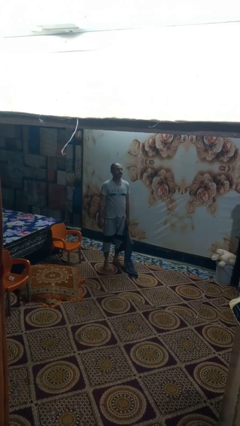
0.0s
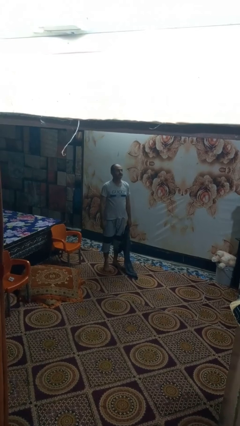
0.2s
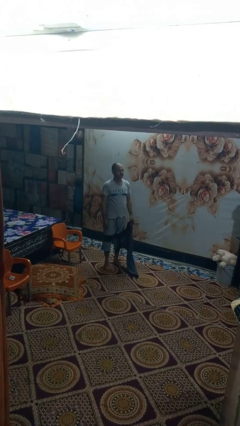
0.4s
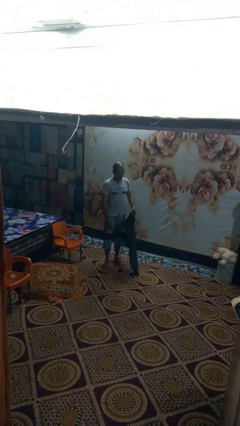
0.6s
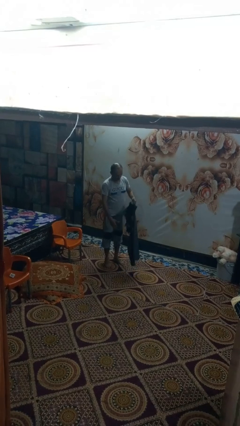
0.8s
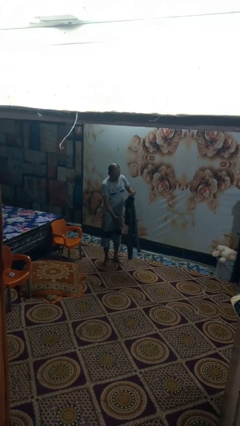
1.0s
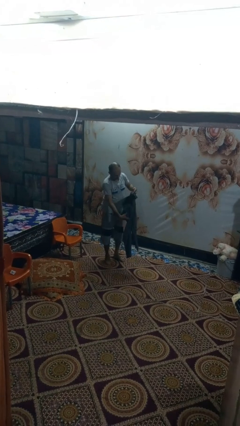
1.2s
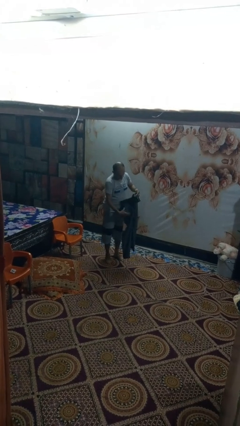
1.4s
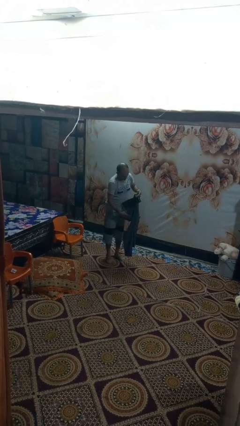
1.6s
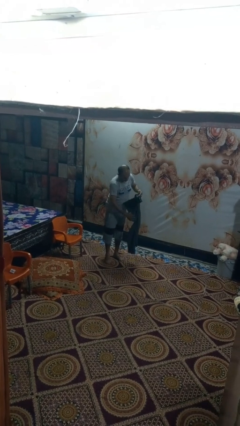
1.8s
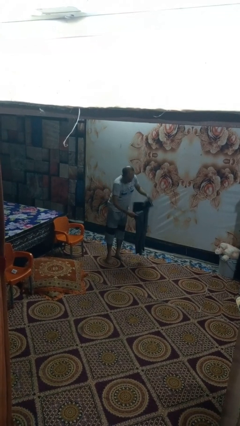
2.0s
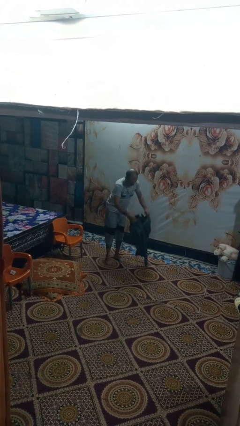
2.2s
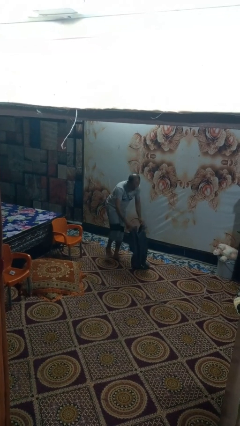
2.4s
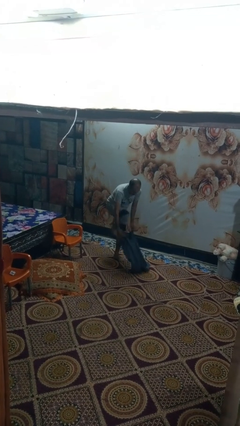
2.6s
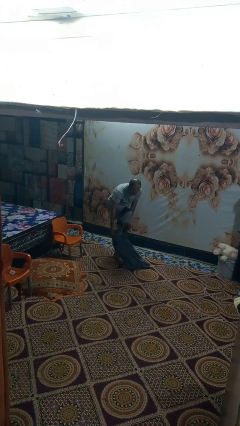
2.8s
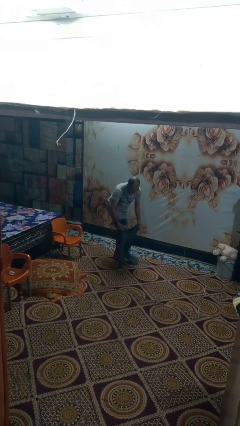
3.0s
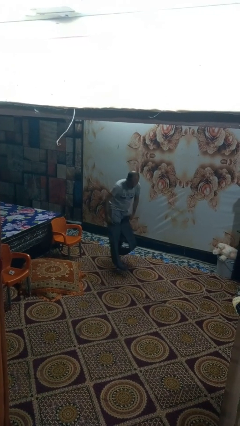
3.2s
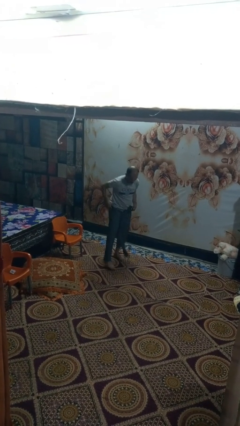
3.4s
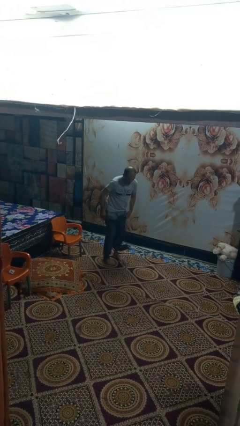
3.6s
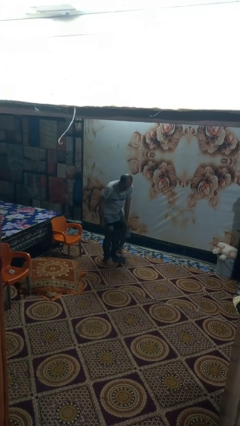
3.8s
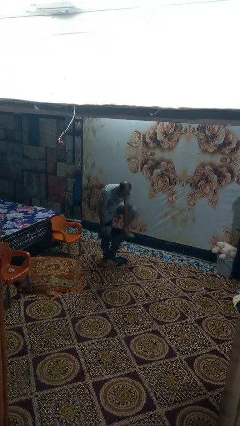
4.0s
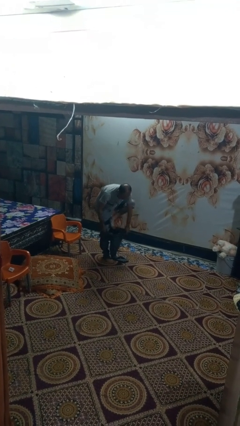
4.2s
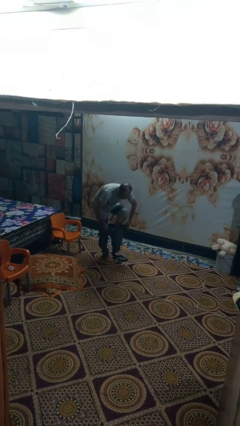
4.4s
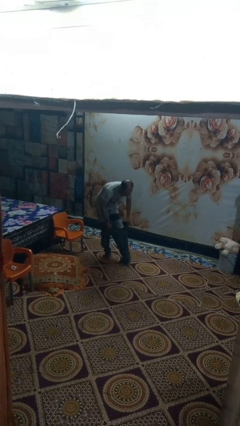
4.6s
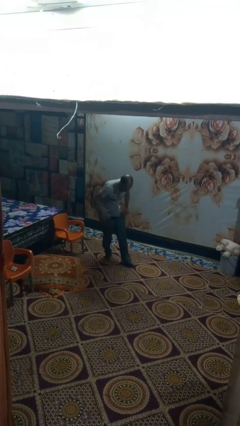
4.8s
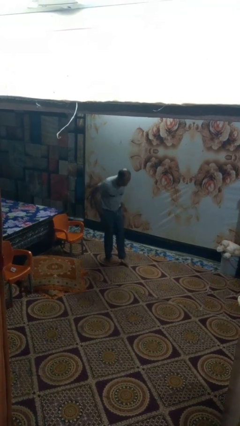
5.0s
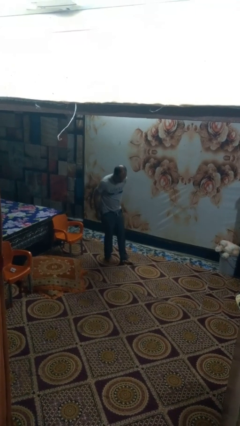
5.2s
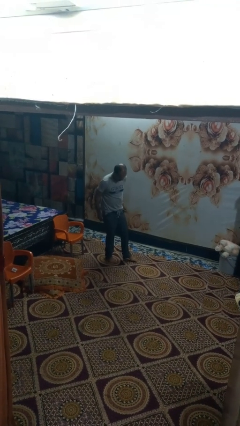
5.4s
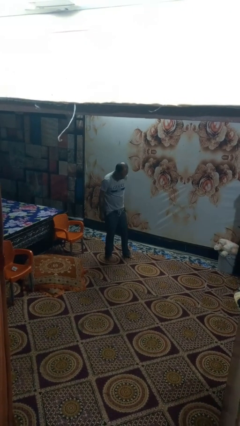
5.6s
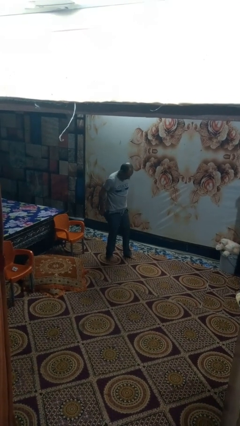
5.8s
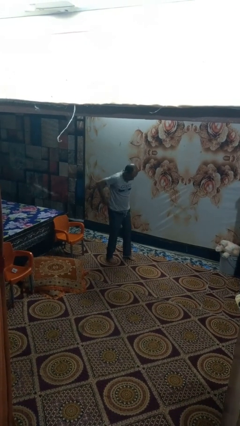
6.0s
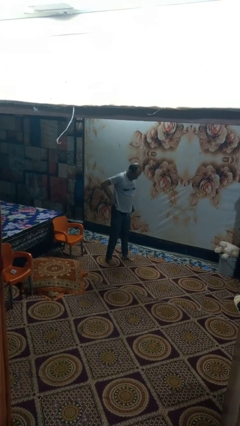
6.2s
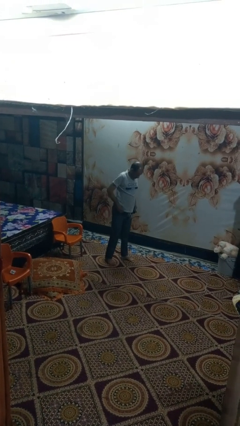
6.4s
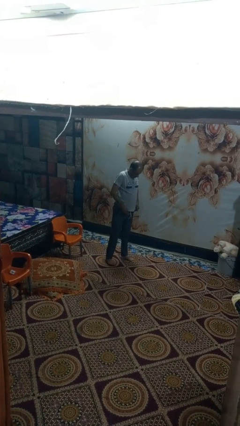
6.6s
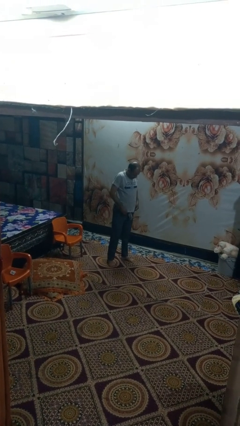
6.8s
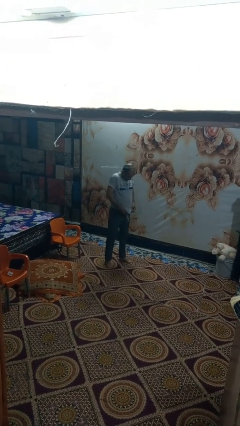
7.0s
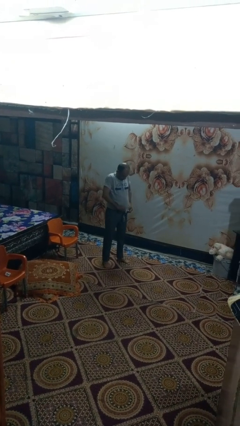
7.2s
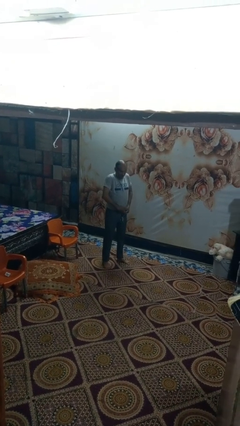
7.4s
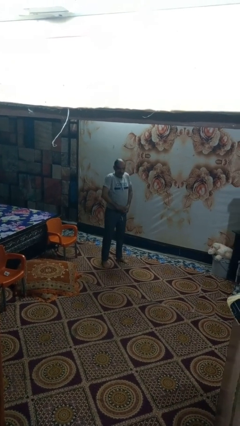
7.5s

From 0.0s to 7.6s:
person puts on pants

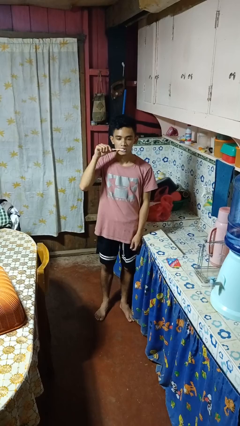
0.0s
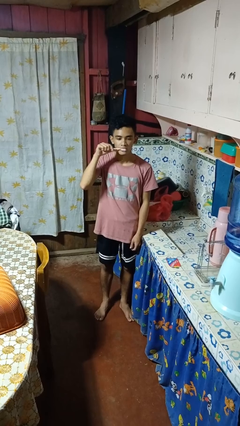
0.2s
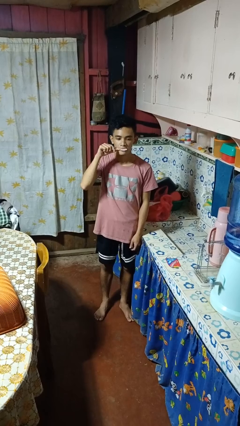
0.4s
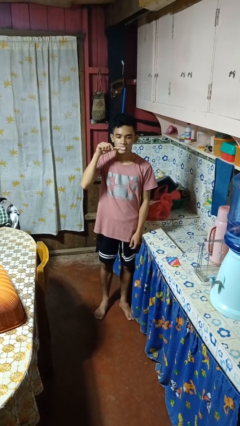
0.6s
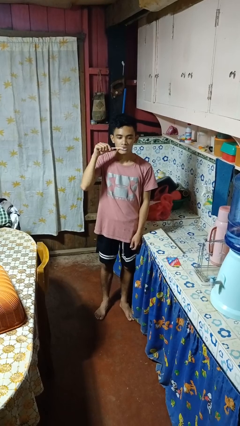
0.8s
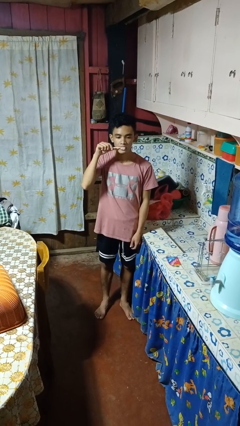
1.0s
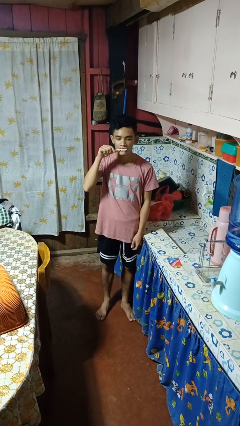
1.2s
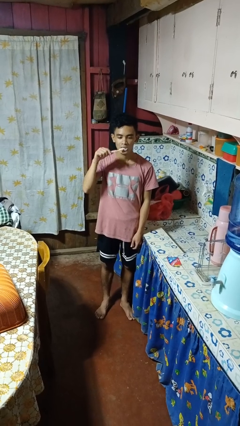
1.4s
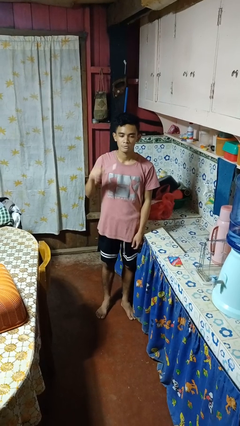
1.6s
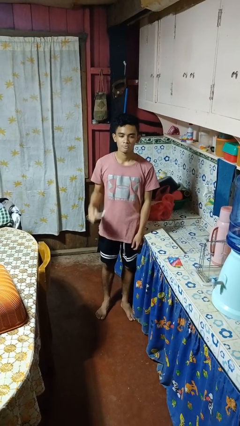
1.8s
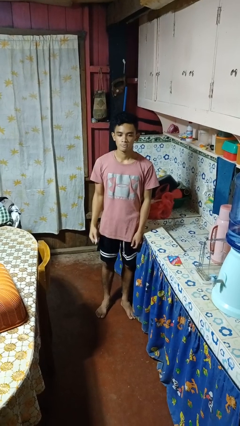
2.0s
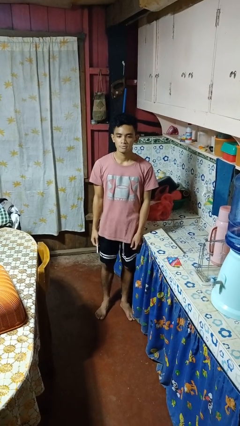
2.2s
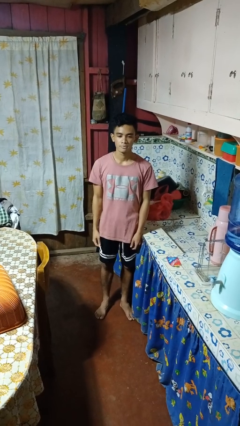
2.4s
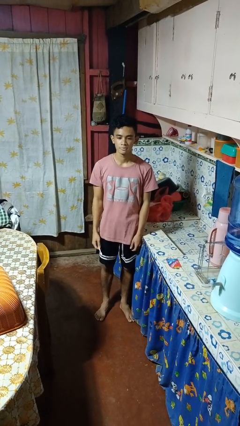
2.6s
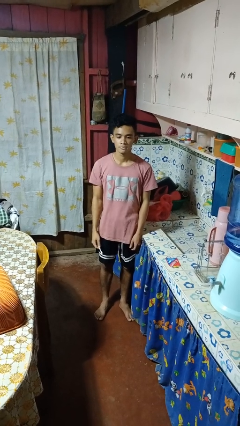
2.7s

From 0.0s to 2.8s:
person brushes teeth

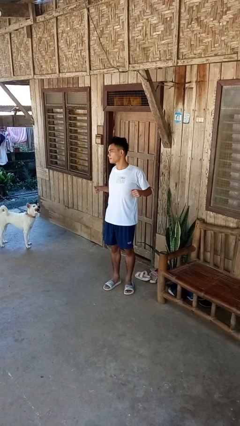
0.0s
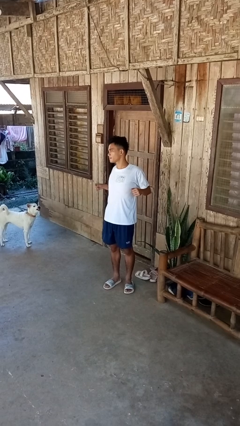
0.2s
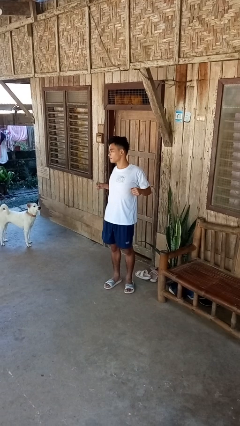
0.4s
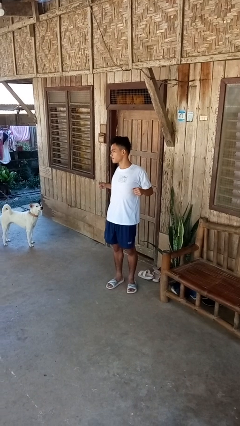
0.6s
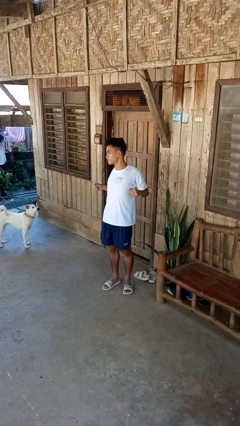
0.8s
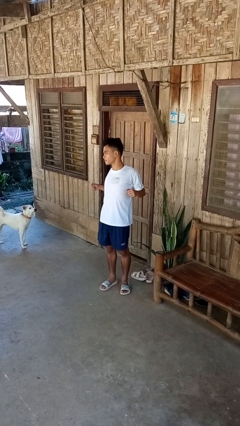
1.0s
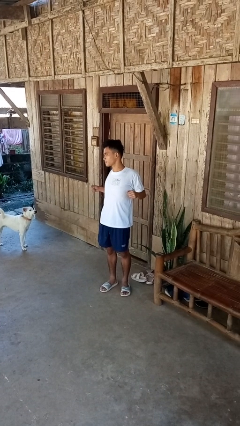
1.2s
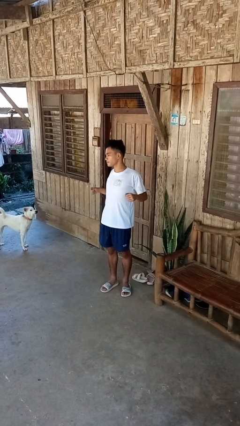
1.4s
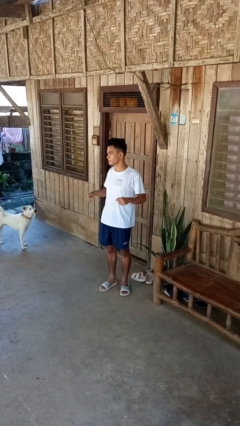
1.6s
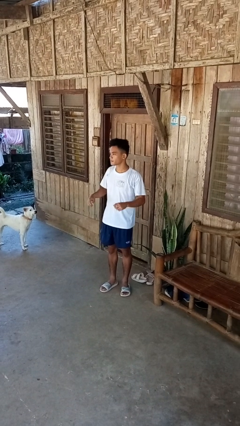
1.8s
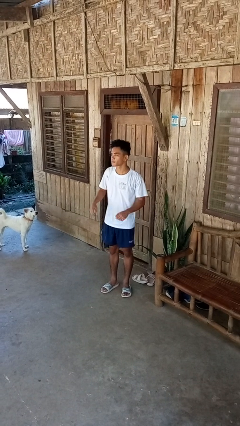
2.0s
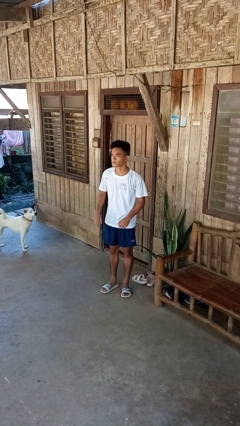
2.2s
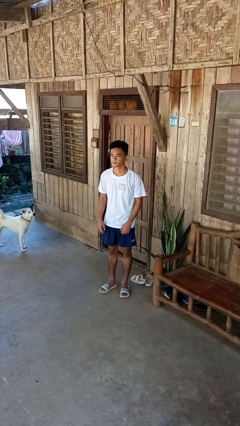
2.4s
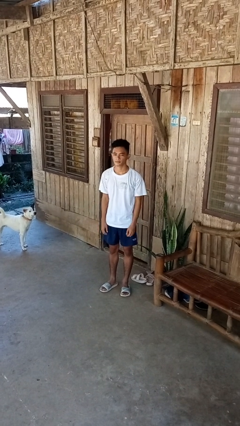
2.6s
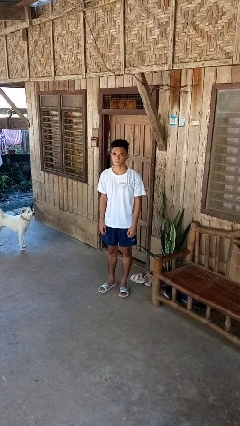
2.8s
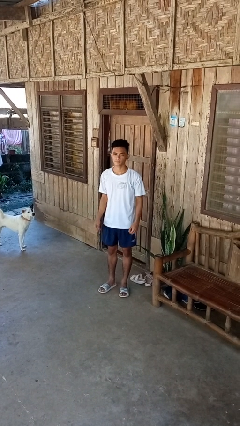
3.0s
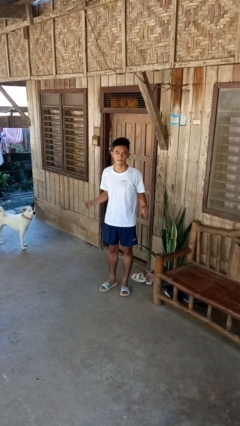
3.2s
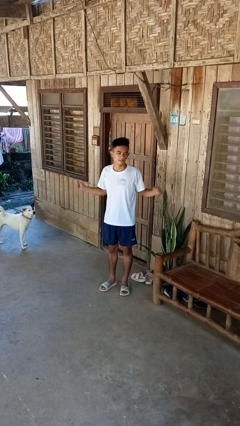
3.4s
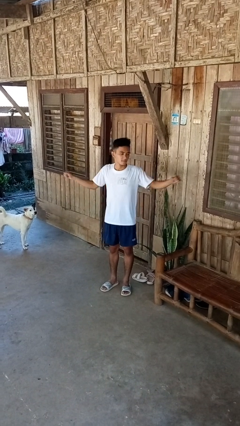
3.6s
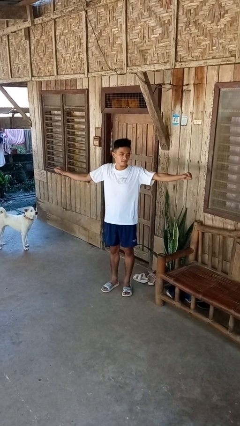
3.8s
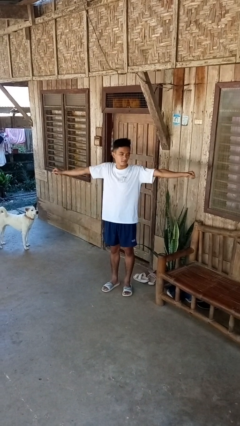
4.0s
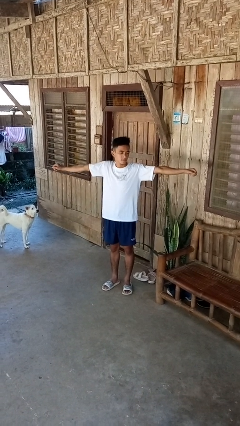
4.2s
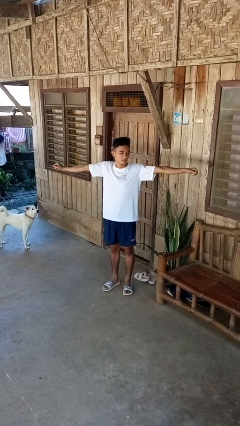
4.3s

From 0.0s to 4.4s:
person stretches back

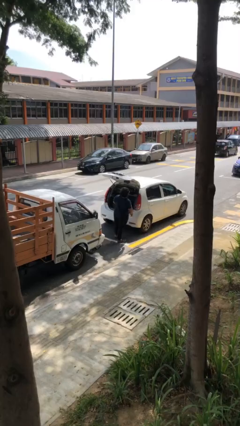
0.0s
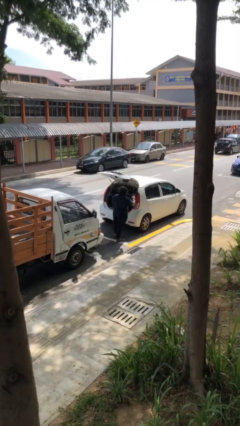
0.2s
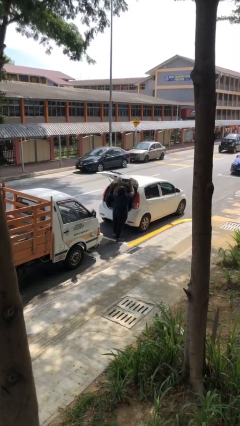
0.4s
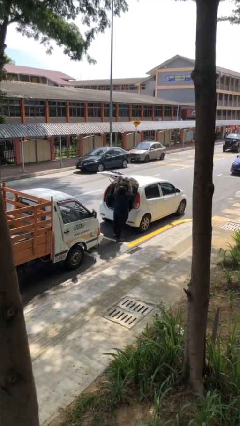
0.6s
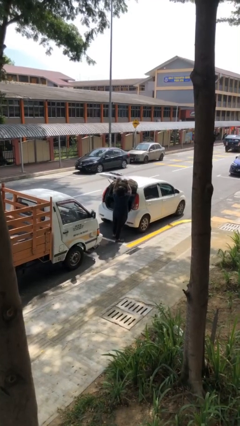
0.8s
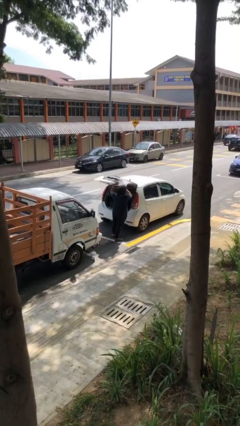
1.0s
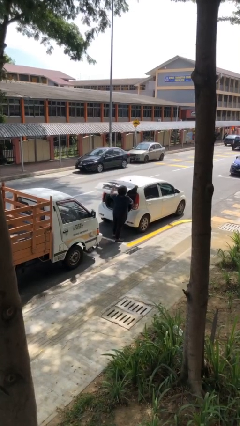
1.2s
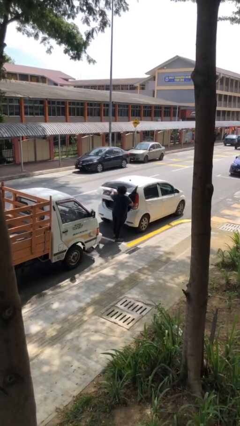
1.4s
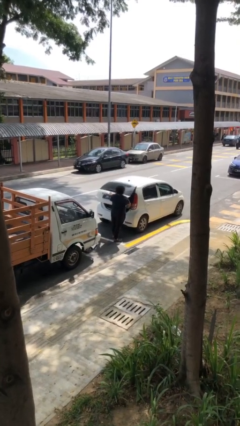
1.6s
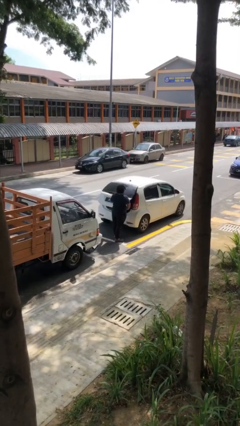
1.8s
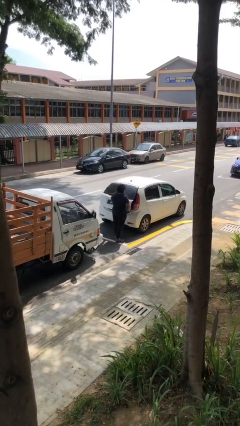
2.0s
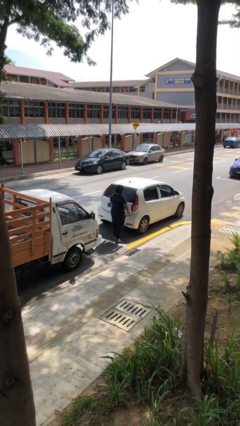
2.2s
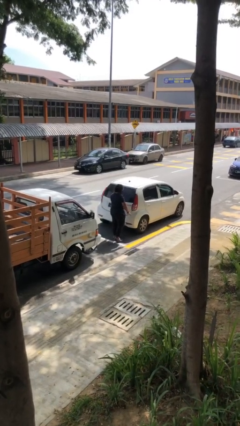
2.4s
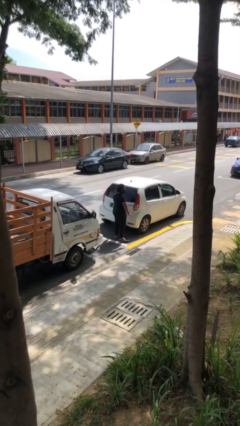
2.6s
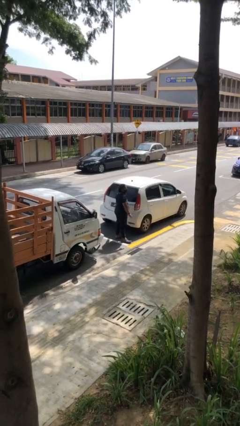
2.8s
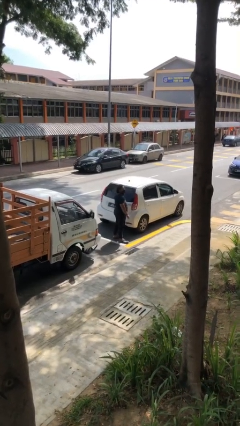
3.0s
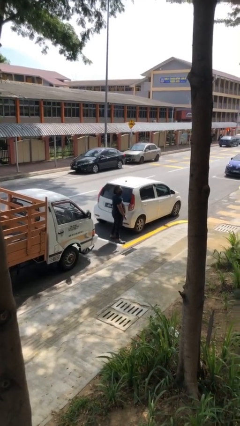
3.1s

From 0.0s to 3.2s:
person closes car trunk
